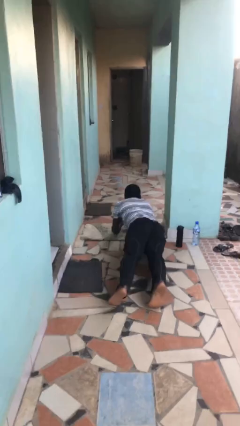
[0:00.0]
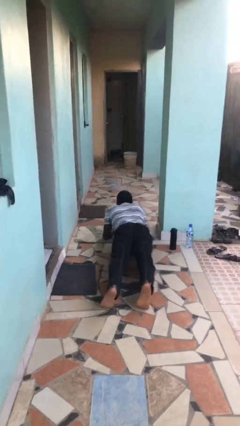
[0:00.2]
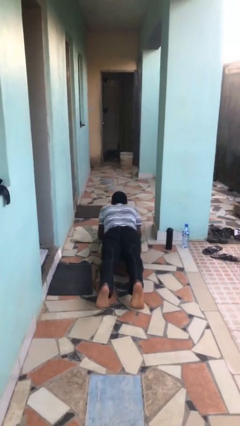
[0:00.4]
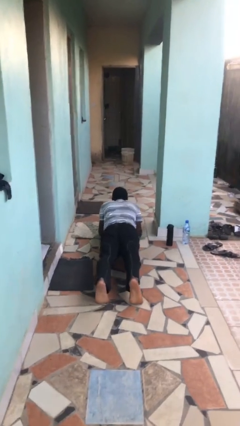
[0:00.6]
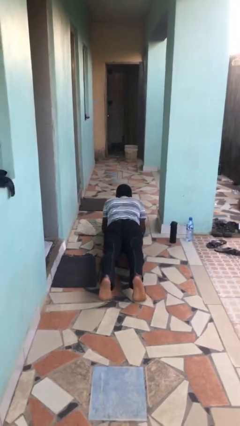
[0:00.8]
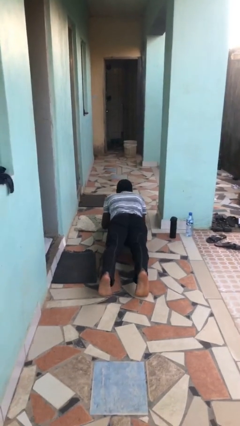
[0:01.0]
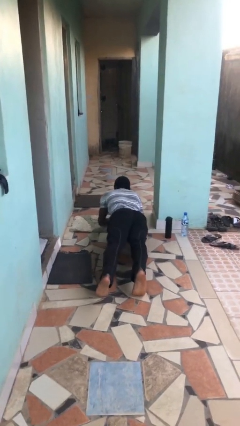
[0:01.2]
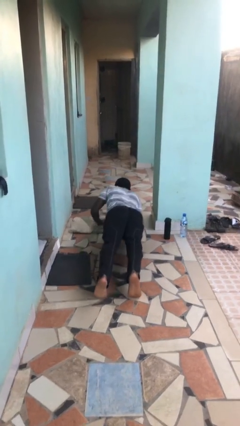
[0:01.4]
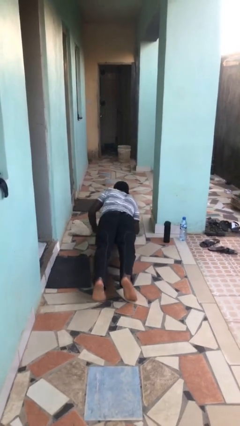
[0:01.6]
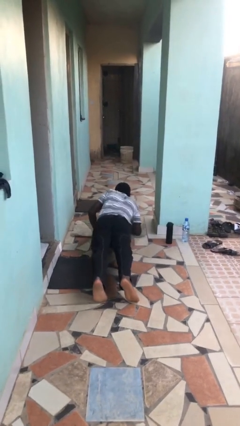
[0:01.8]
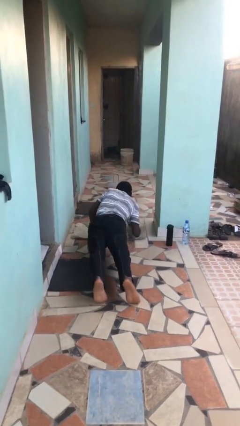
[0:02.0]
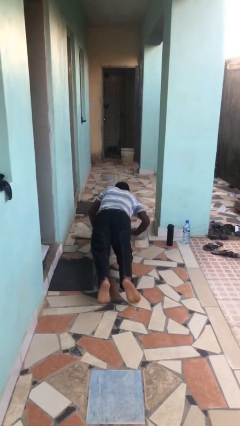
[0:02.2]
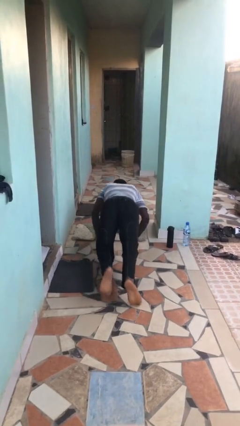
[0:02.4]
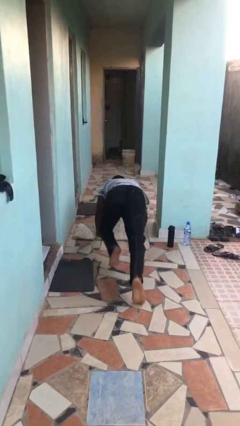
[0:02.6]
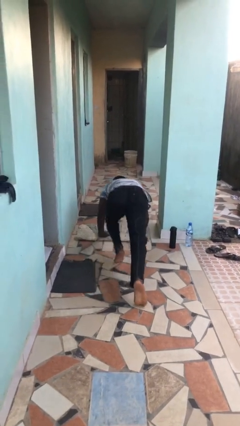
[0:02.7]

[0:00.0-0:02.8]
person exercises with plank

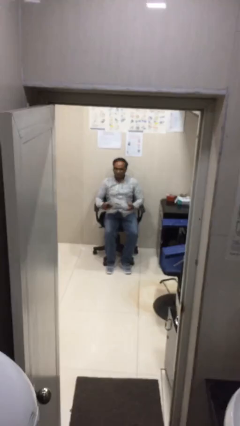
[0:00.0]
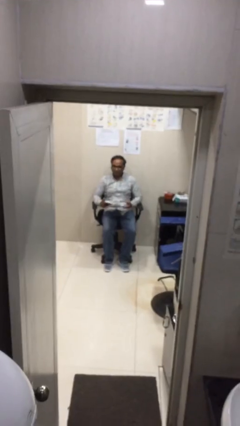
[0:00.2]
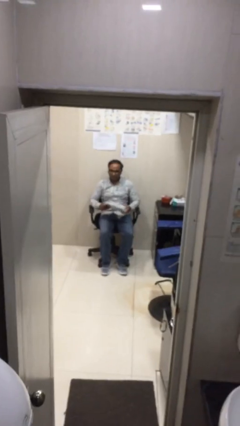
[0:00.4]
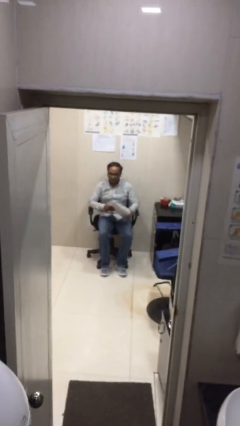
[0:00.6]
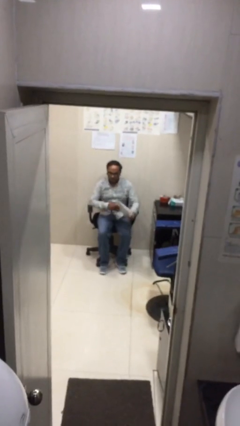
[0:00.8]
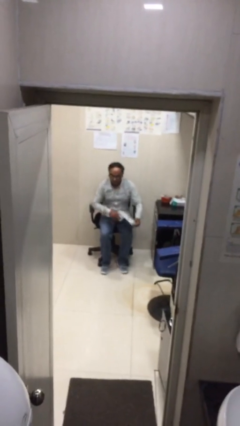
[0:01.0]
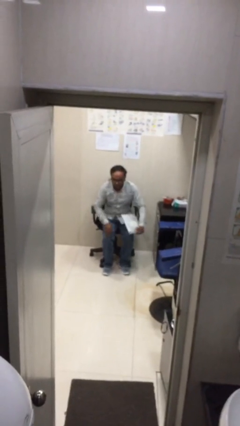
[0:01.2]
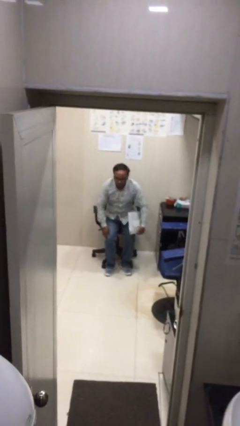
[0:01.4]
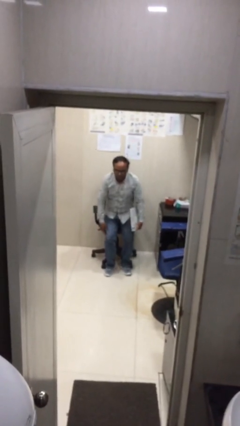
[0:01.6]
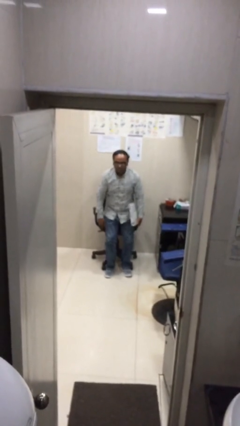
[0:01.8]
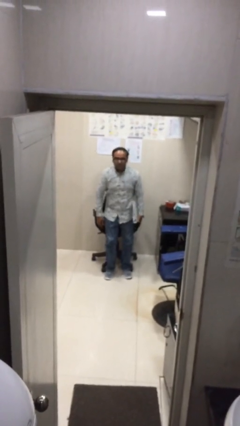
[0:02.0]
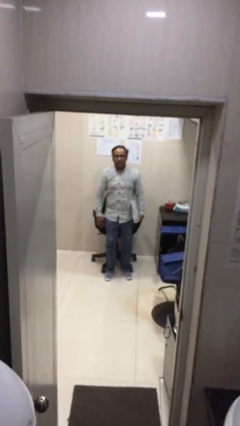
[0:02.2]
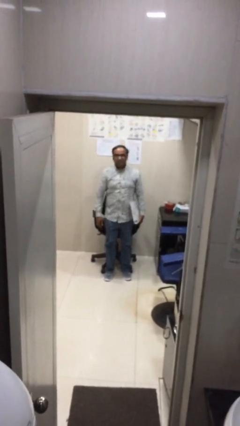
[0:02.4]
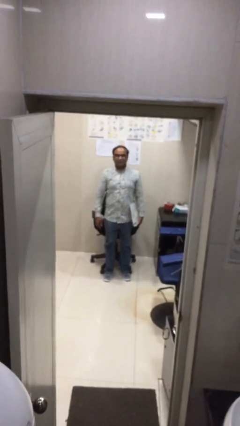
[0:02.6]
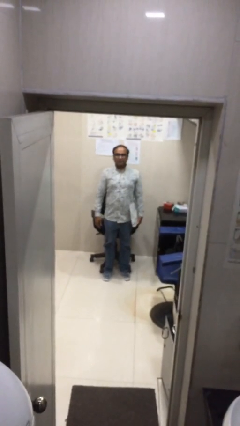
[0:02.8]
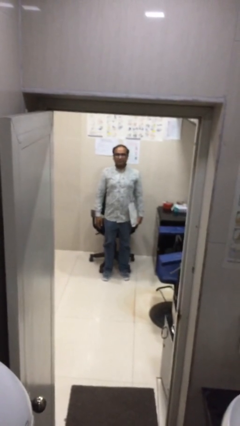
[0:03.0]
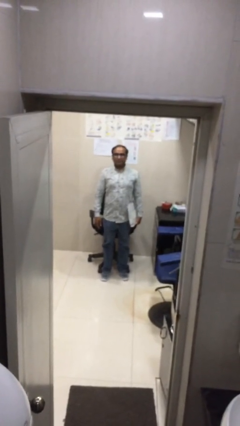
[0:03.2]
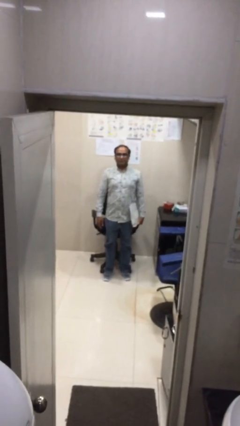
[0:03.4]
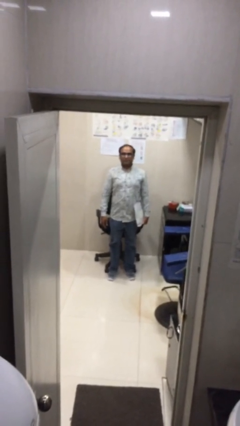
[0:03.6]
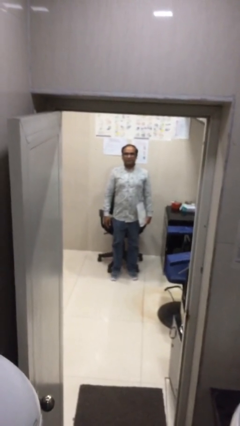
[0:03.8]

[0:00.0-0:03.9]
person stands up

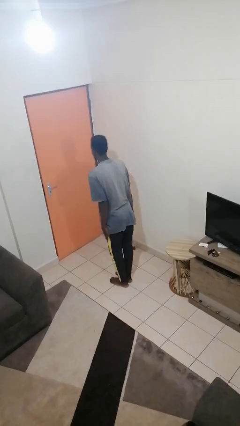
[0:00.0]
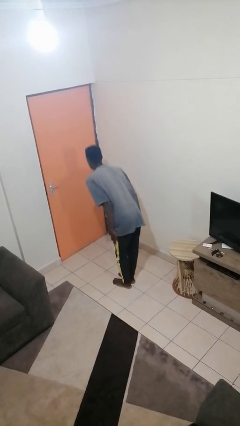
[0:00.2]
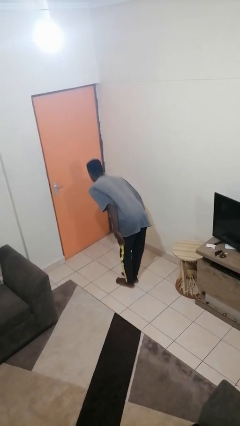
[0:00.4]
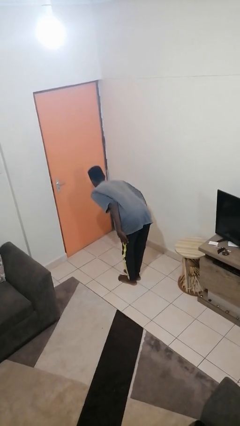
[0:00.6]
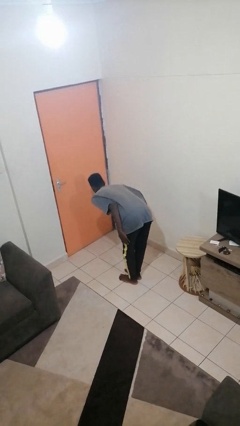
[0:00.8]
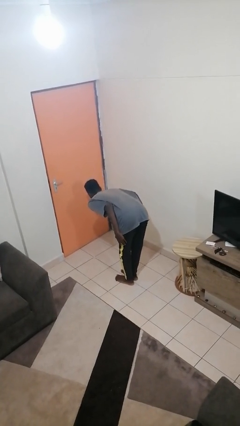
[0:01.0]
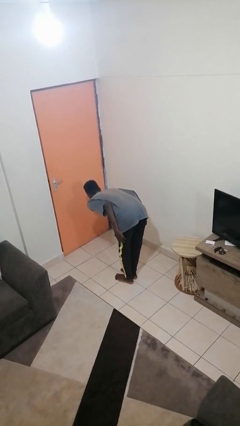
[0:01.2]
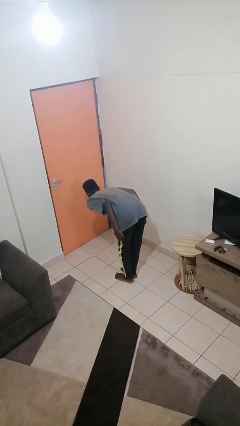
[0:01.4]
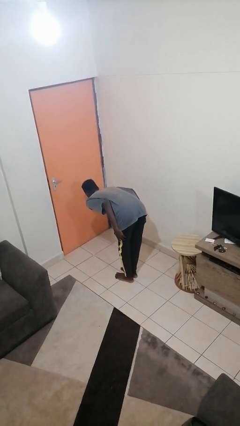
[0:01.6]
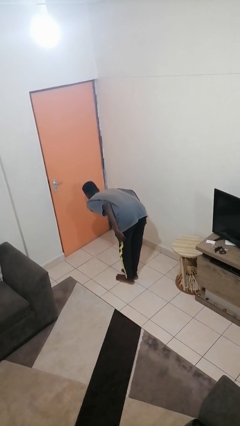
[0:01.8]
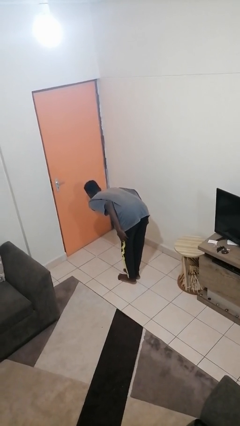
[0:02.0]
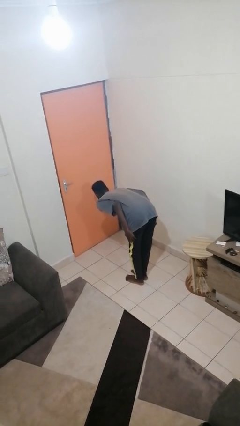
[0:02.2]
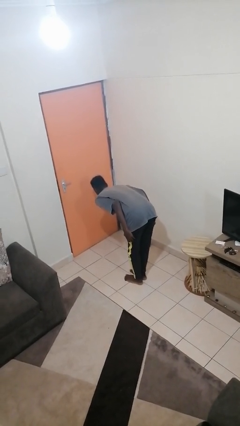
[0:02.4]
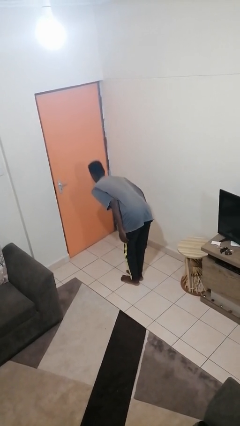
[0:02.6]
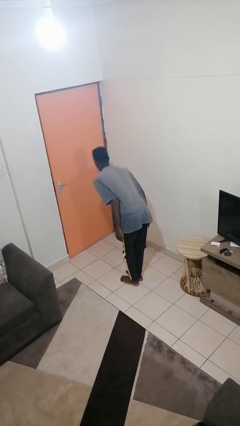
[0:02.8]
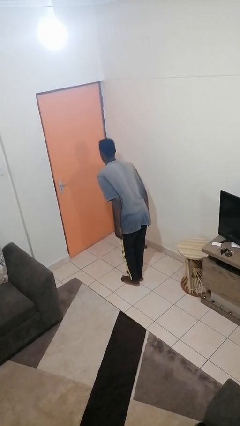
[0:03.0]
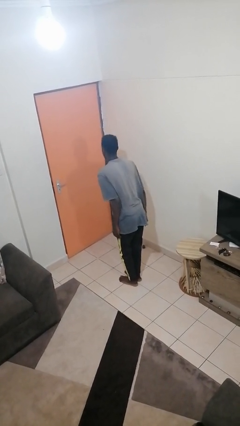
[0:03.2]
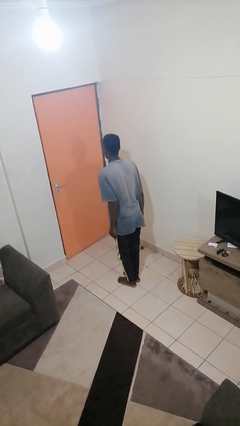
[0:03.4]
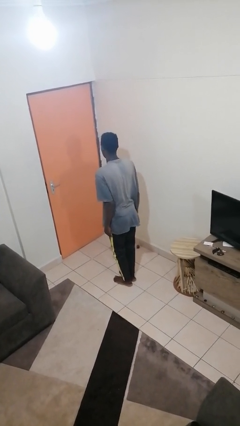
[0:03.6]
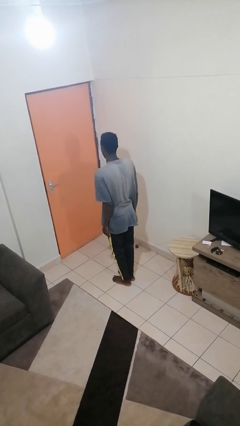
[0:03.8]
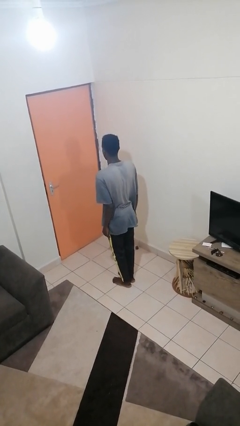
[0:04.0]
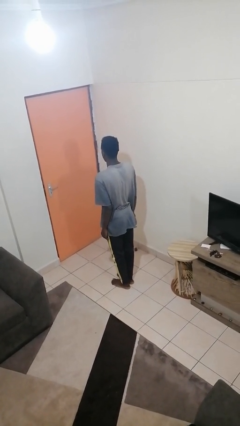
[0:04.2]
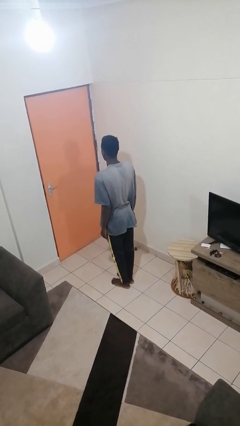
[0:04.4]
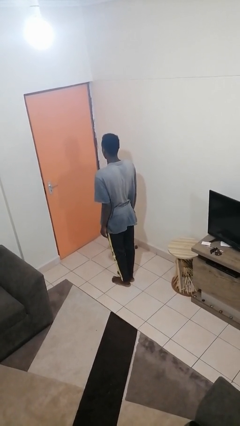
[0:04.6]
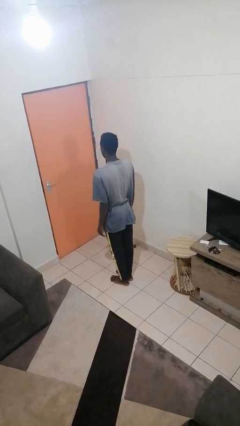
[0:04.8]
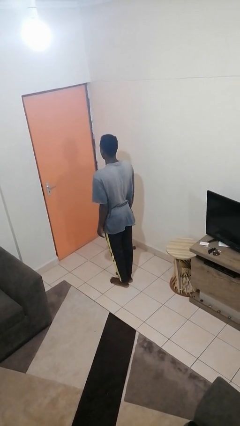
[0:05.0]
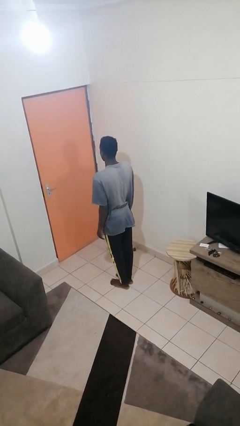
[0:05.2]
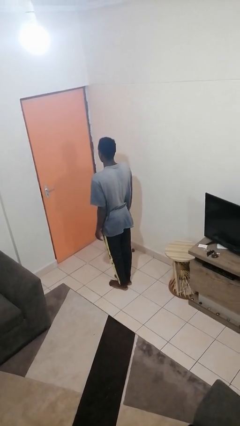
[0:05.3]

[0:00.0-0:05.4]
person bows

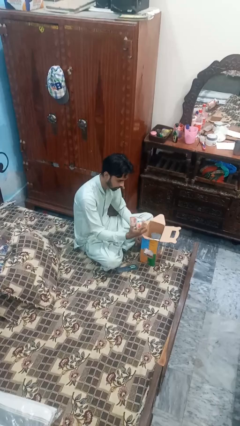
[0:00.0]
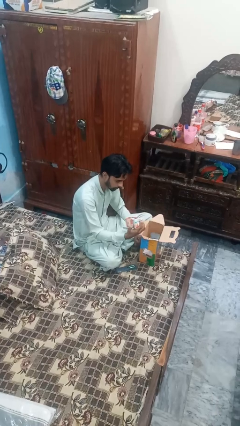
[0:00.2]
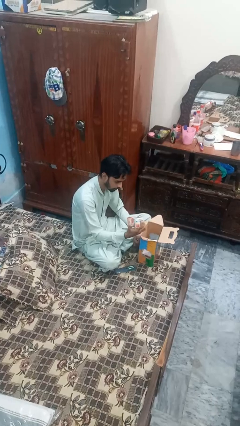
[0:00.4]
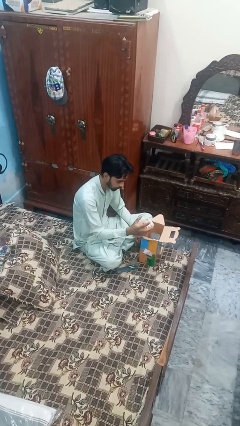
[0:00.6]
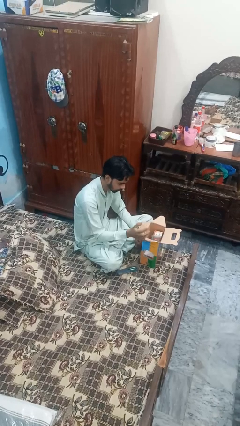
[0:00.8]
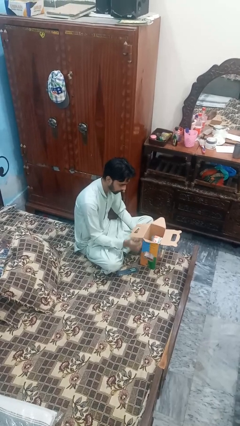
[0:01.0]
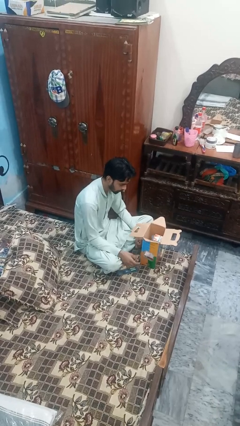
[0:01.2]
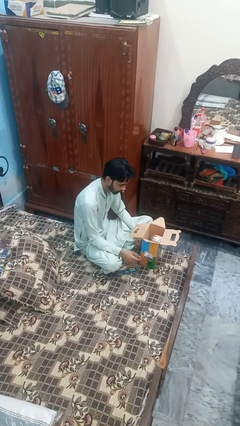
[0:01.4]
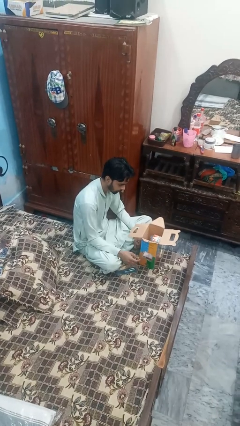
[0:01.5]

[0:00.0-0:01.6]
person puts object into box

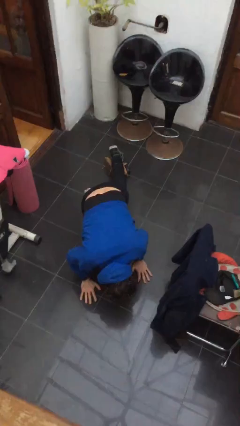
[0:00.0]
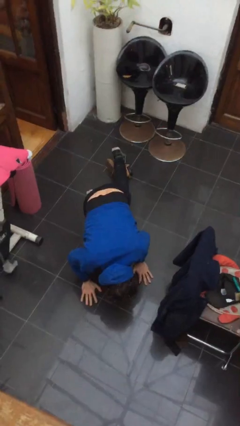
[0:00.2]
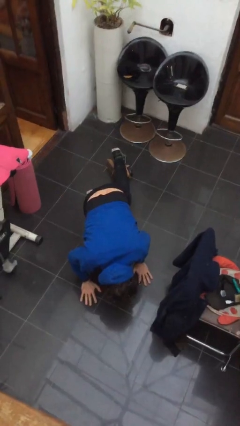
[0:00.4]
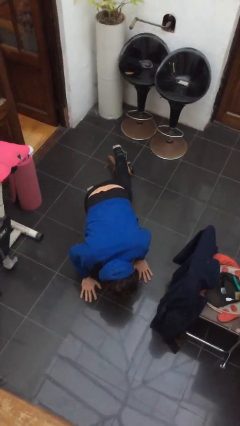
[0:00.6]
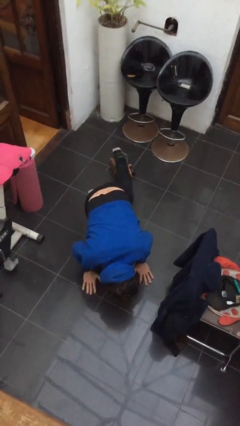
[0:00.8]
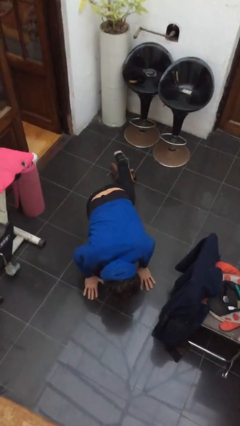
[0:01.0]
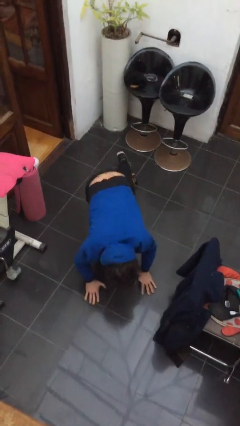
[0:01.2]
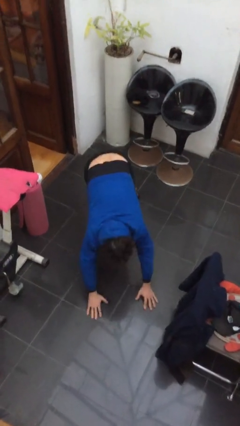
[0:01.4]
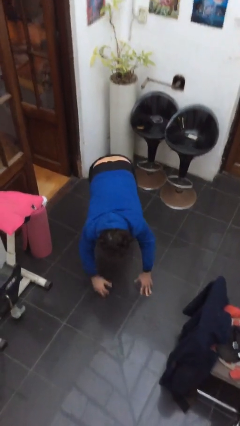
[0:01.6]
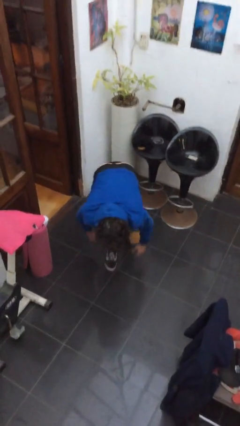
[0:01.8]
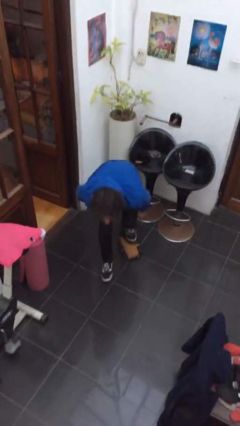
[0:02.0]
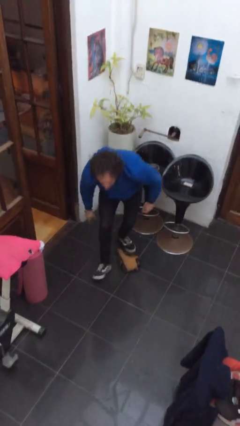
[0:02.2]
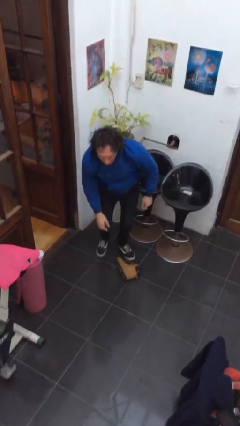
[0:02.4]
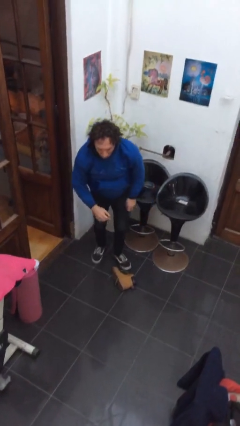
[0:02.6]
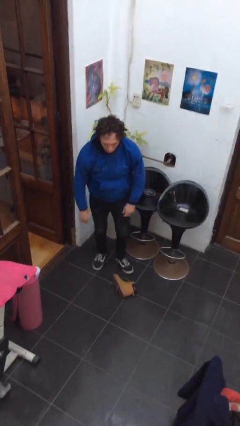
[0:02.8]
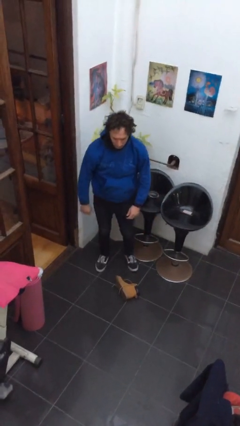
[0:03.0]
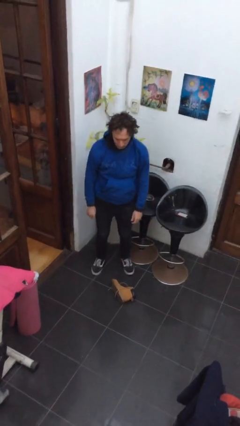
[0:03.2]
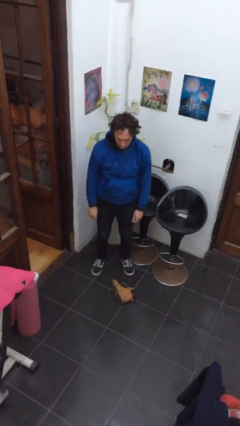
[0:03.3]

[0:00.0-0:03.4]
person stands up from floor
